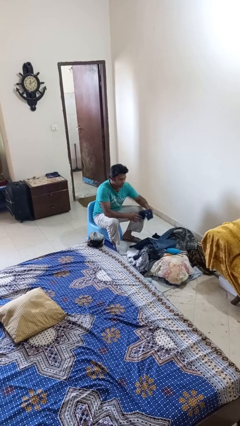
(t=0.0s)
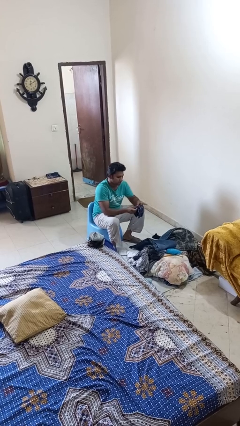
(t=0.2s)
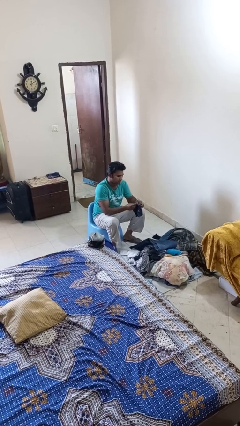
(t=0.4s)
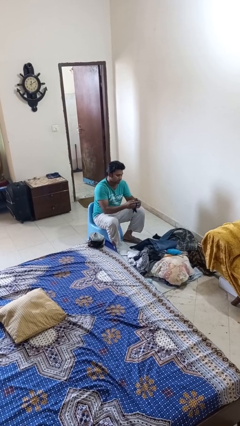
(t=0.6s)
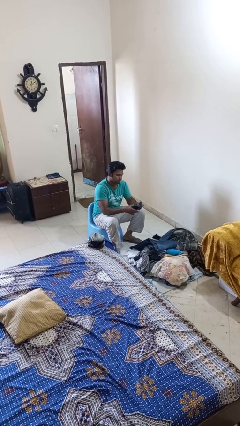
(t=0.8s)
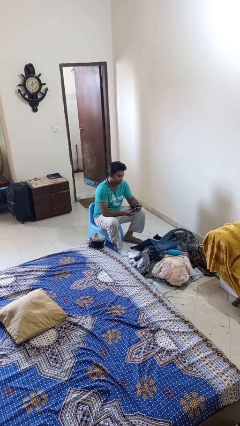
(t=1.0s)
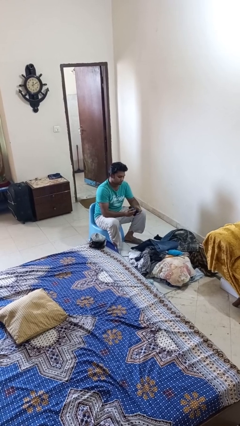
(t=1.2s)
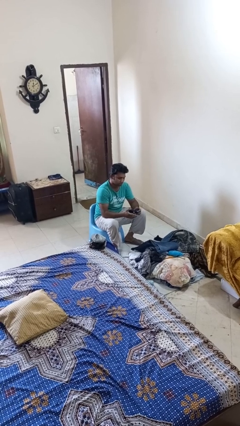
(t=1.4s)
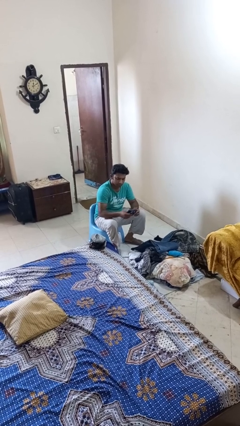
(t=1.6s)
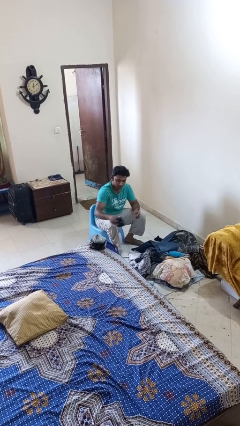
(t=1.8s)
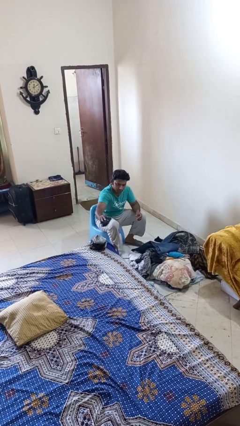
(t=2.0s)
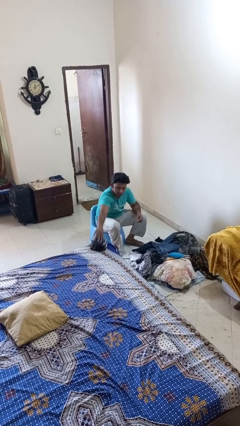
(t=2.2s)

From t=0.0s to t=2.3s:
person folds socks

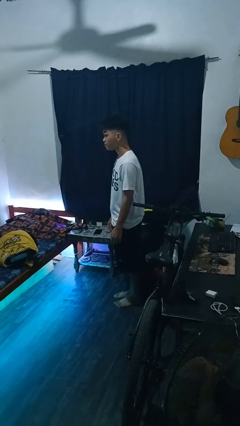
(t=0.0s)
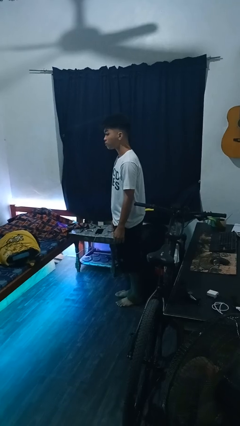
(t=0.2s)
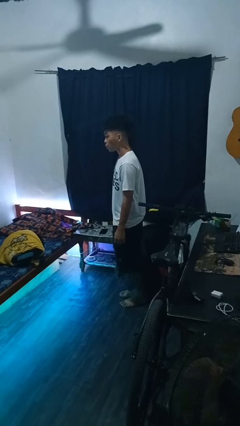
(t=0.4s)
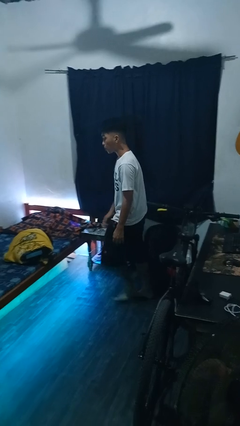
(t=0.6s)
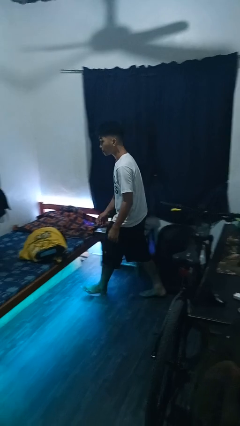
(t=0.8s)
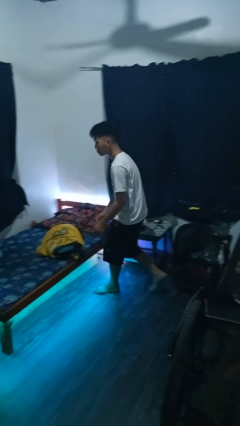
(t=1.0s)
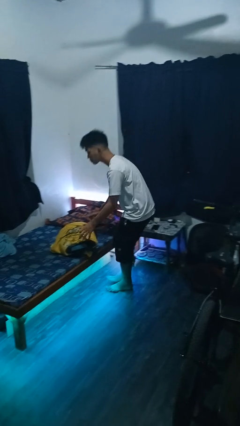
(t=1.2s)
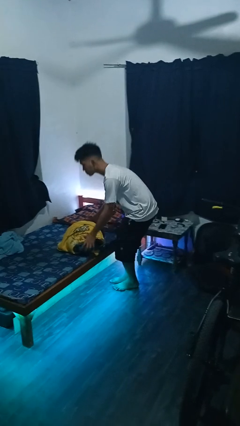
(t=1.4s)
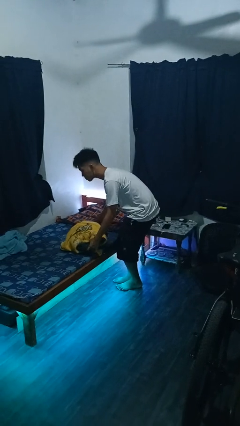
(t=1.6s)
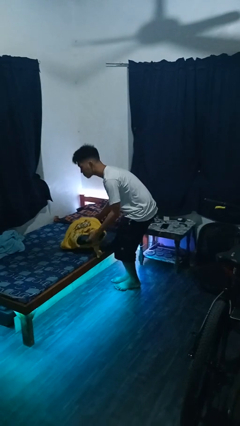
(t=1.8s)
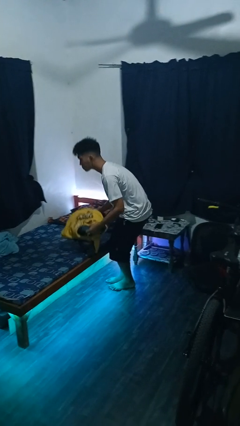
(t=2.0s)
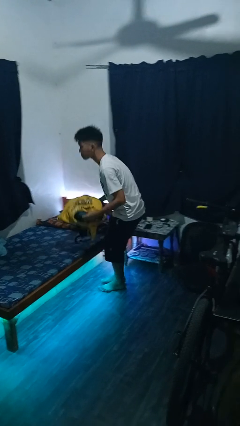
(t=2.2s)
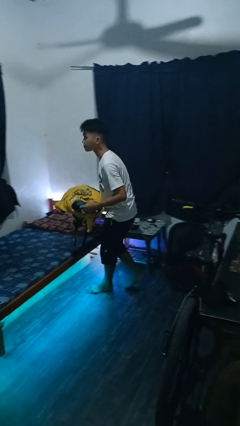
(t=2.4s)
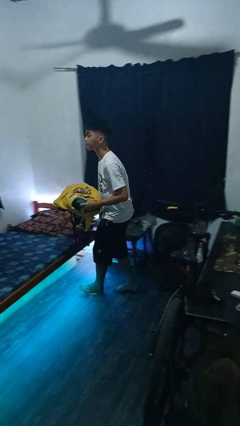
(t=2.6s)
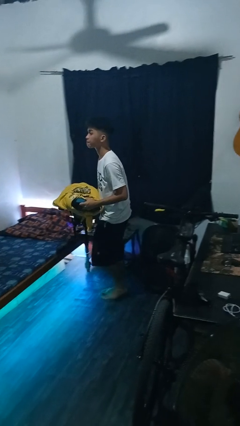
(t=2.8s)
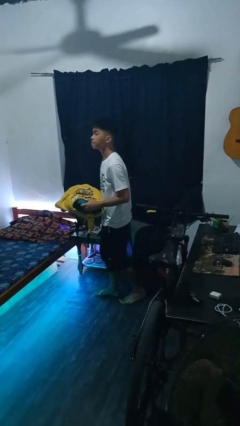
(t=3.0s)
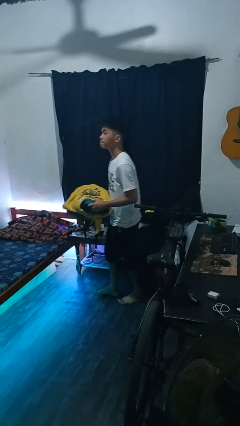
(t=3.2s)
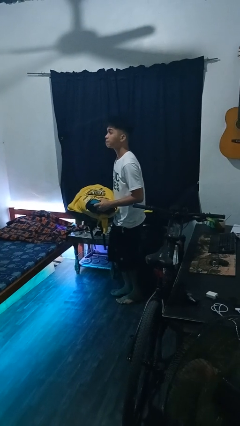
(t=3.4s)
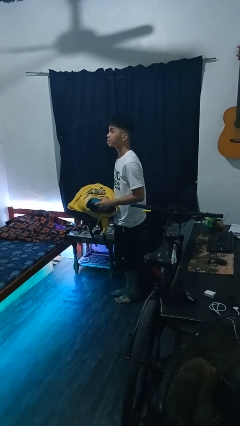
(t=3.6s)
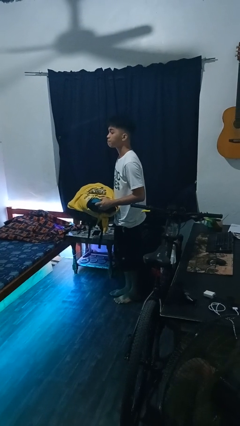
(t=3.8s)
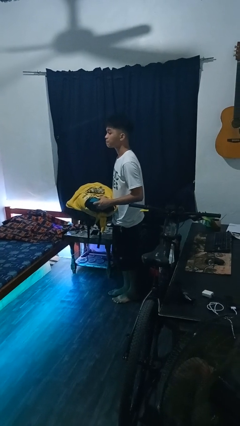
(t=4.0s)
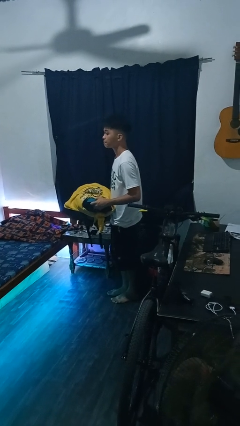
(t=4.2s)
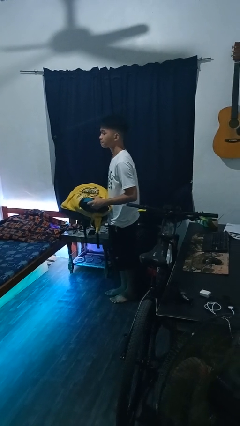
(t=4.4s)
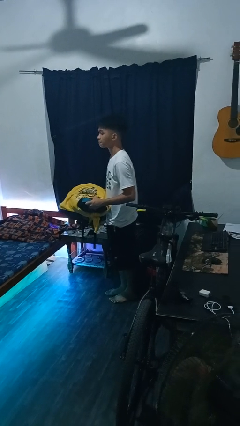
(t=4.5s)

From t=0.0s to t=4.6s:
person picks up object from bed

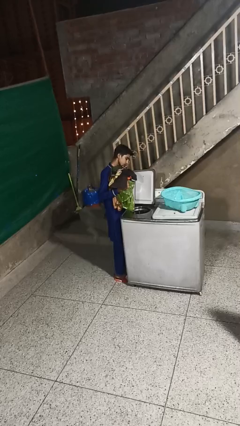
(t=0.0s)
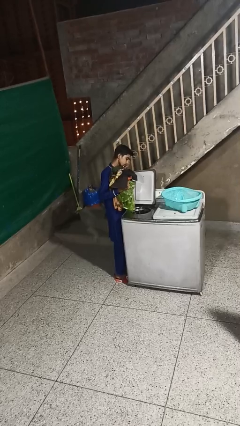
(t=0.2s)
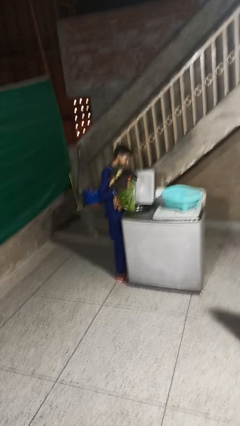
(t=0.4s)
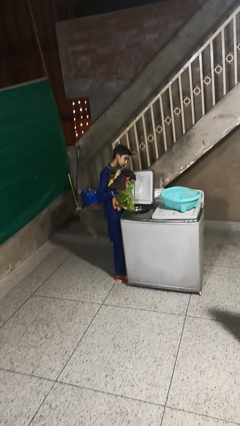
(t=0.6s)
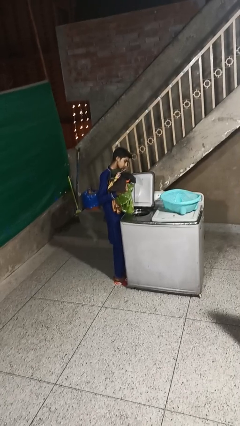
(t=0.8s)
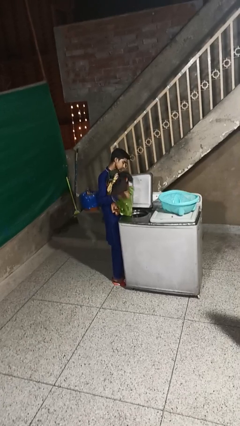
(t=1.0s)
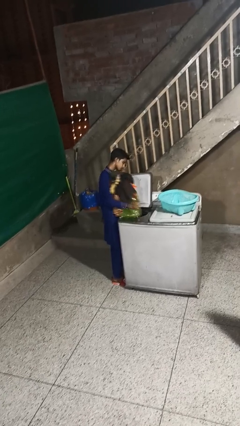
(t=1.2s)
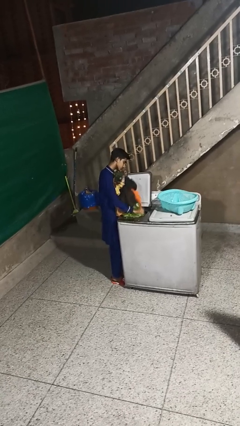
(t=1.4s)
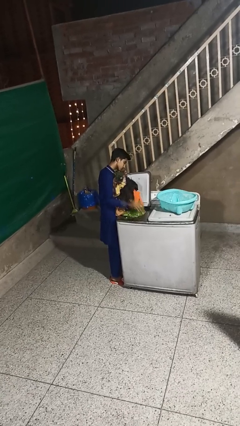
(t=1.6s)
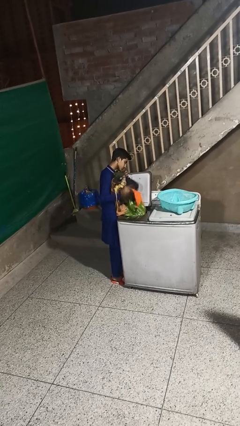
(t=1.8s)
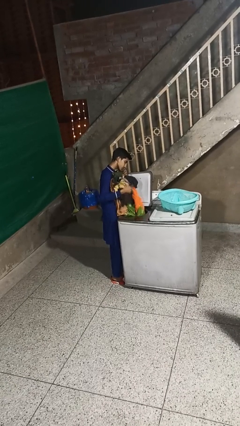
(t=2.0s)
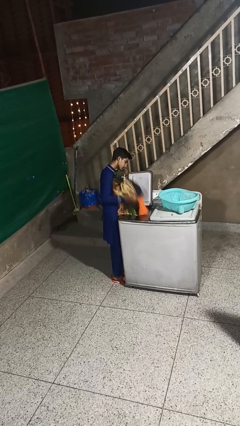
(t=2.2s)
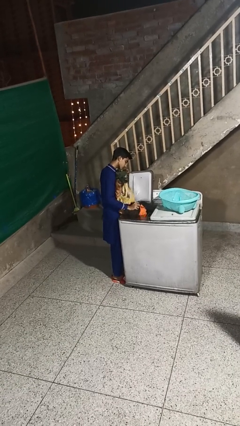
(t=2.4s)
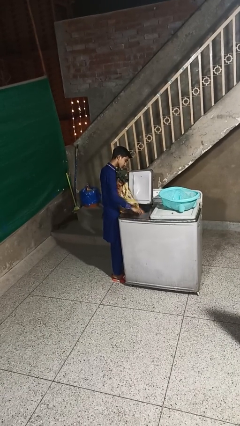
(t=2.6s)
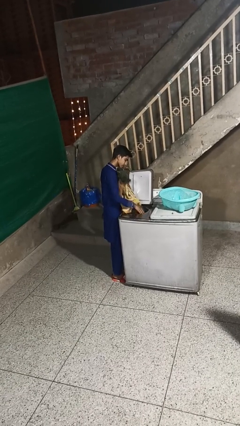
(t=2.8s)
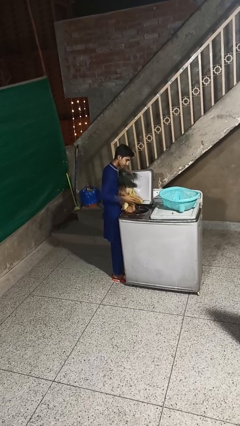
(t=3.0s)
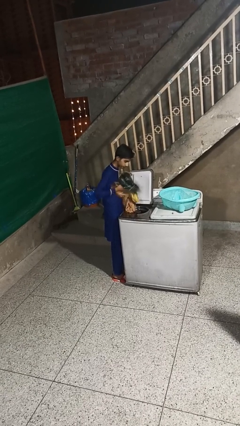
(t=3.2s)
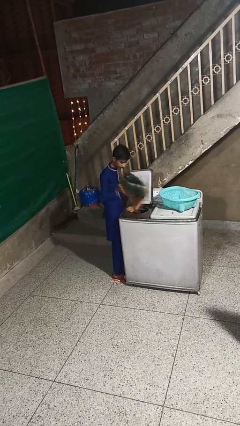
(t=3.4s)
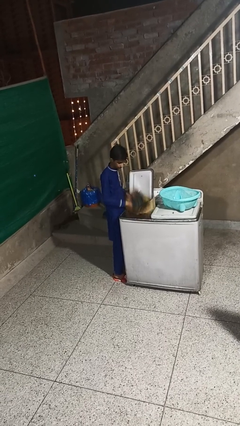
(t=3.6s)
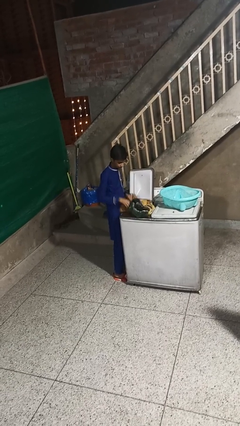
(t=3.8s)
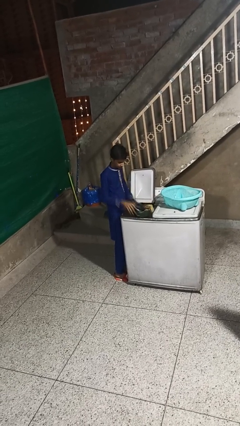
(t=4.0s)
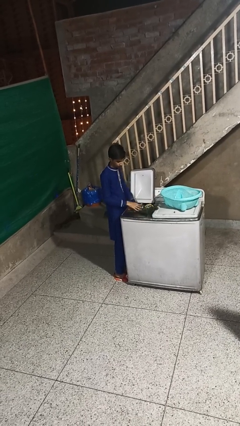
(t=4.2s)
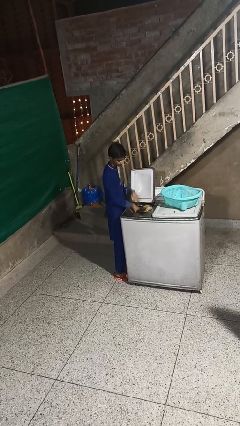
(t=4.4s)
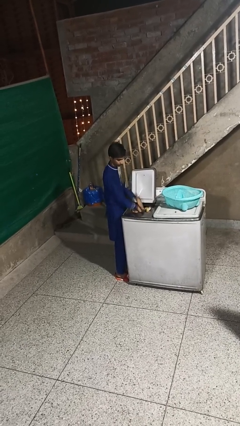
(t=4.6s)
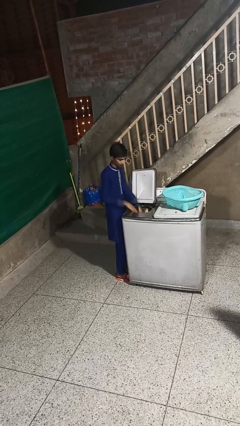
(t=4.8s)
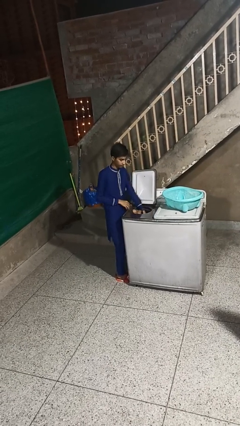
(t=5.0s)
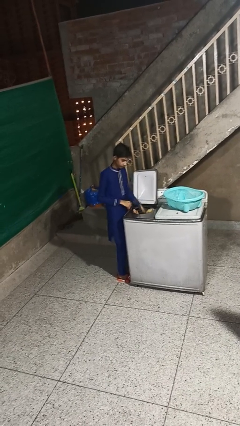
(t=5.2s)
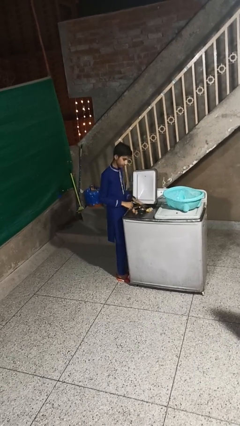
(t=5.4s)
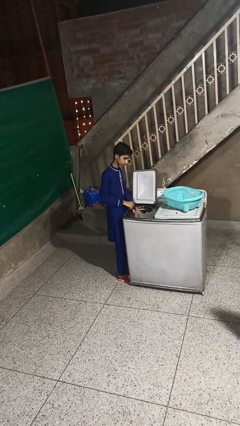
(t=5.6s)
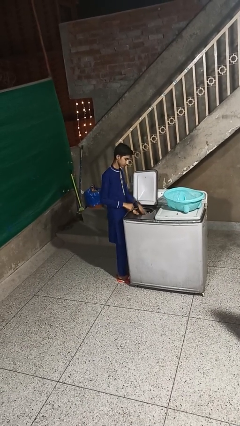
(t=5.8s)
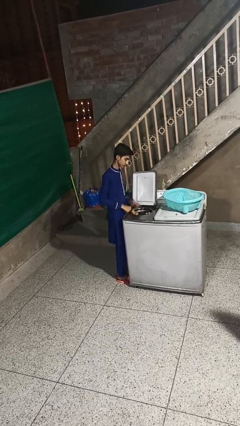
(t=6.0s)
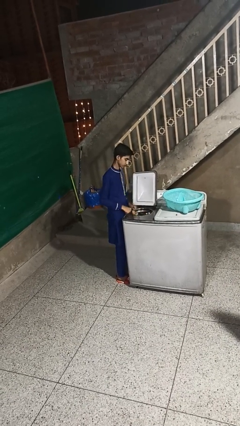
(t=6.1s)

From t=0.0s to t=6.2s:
person loads dryer

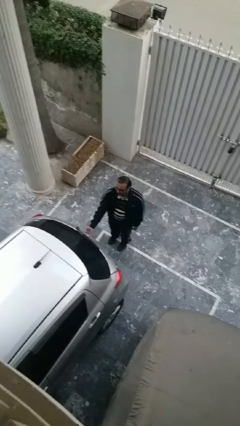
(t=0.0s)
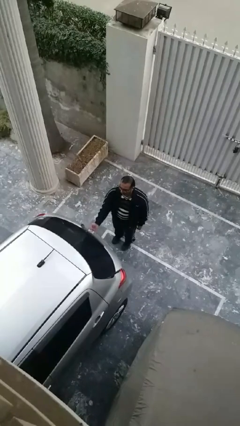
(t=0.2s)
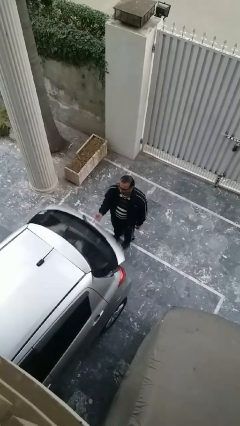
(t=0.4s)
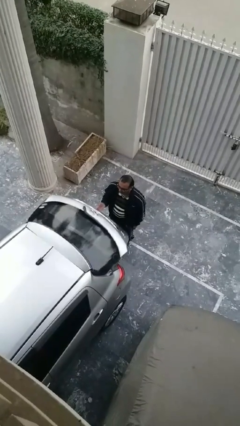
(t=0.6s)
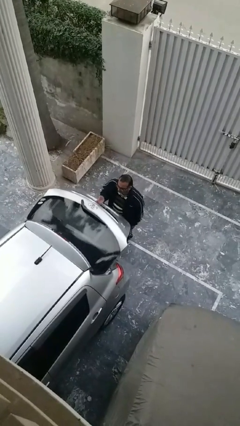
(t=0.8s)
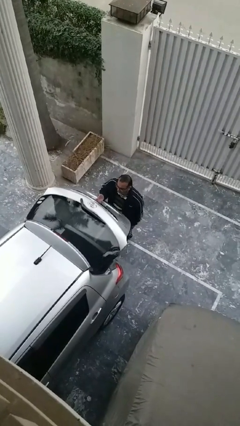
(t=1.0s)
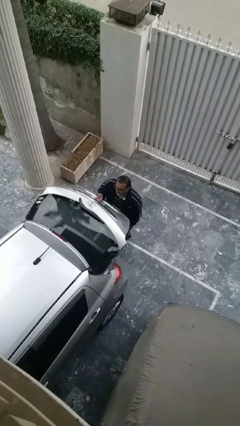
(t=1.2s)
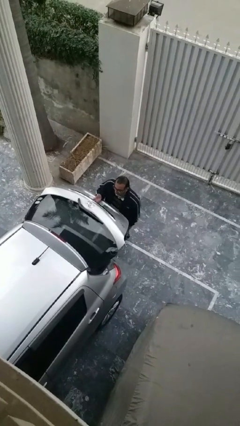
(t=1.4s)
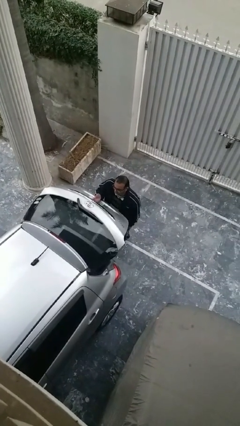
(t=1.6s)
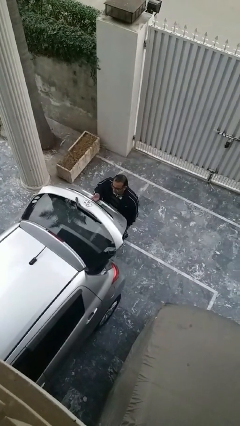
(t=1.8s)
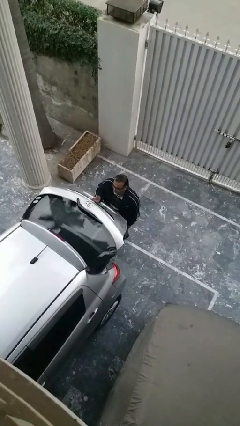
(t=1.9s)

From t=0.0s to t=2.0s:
person opens car trunk

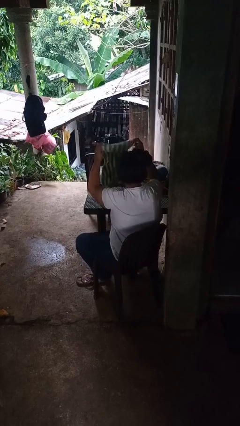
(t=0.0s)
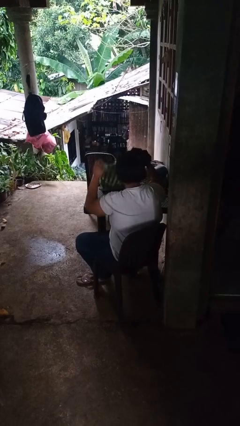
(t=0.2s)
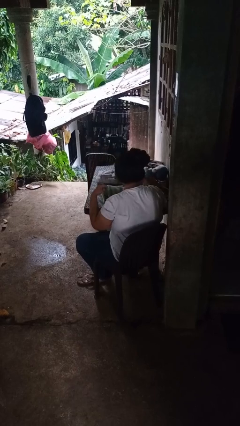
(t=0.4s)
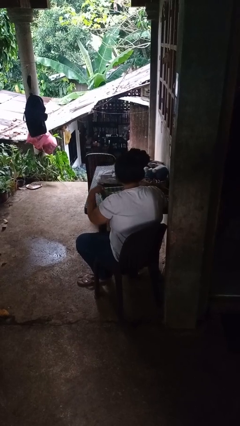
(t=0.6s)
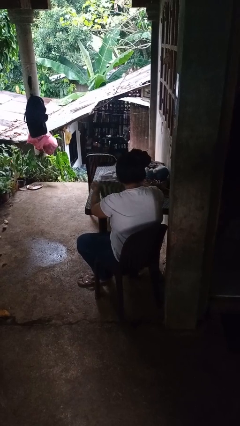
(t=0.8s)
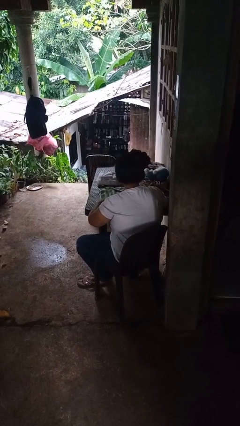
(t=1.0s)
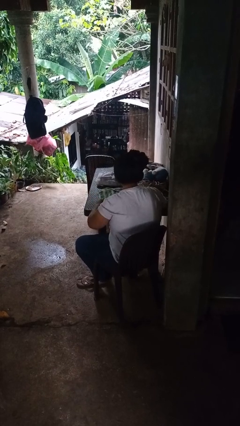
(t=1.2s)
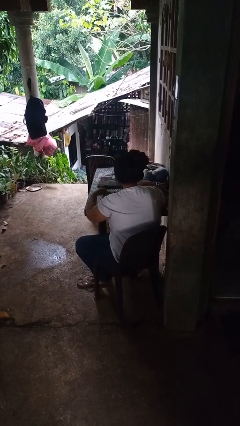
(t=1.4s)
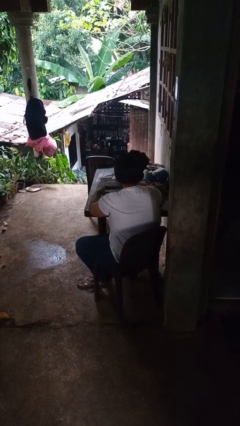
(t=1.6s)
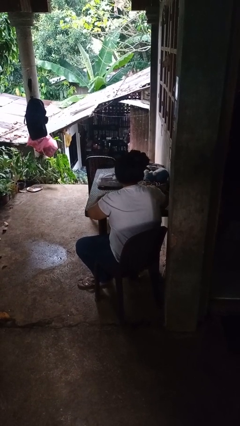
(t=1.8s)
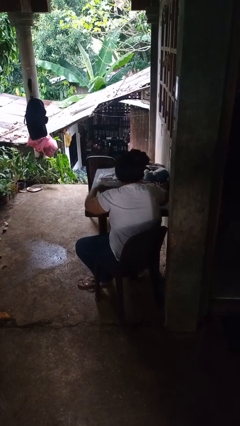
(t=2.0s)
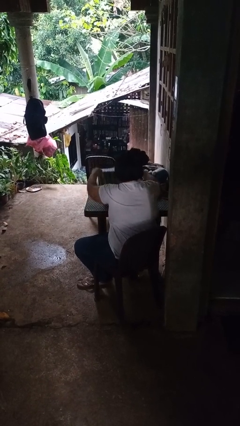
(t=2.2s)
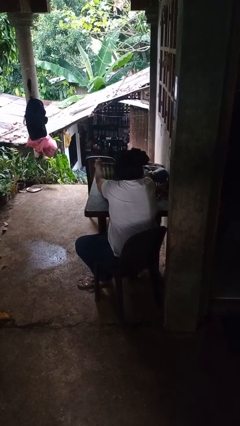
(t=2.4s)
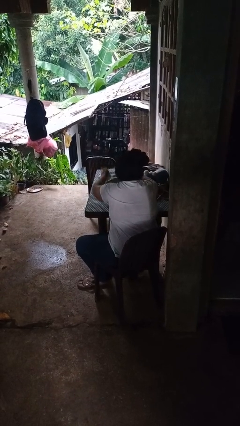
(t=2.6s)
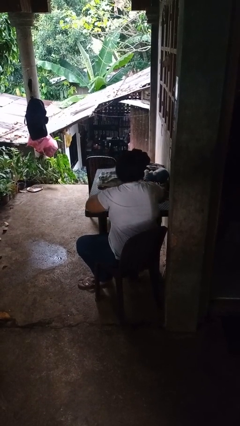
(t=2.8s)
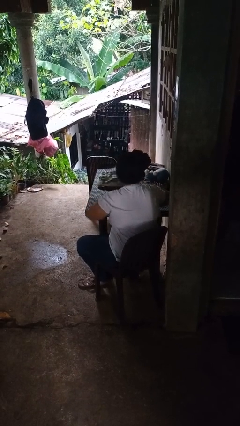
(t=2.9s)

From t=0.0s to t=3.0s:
person folds towel
